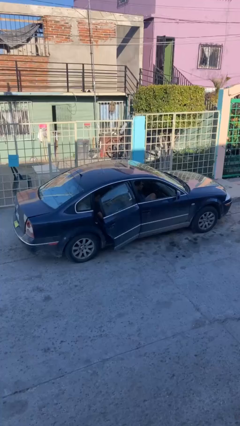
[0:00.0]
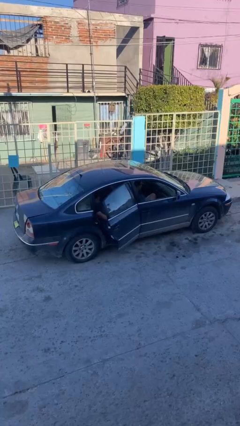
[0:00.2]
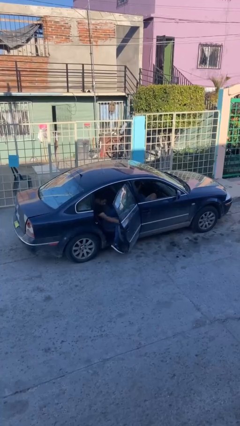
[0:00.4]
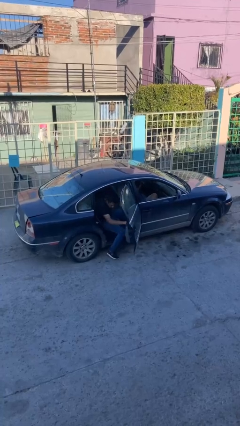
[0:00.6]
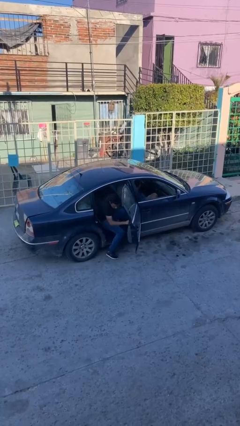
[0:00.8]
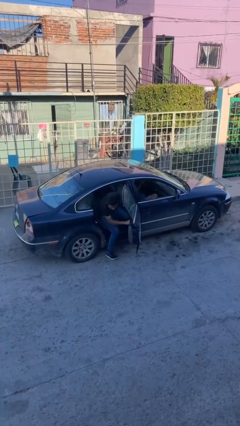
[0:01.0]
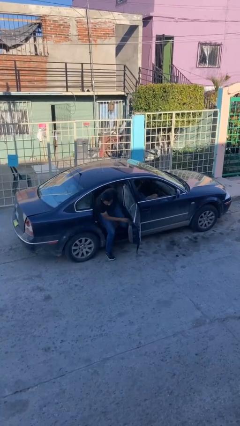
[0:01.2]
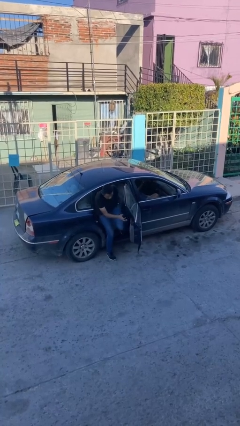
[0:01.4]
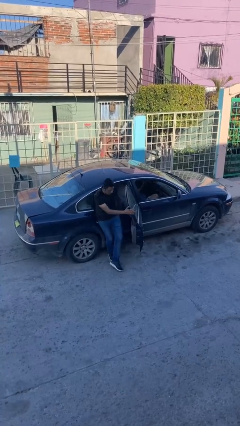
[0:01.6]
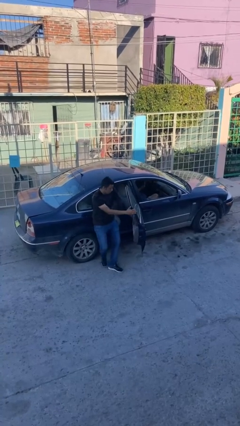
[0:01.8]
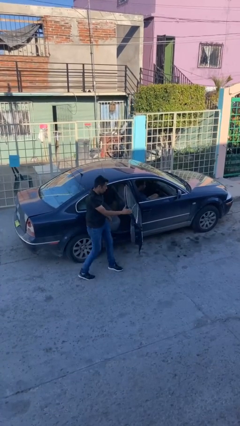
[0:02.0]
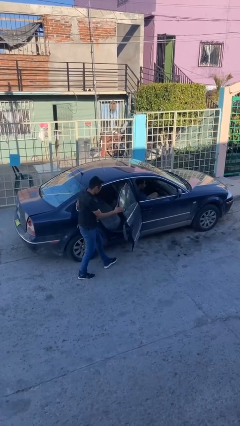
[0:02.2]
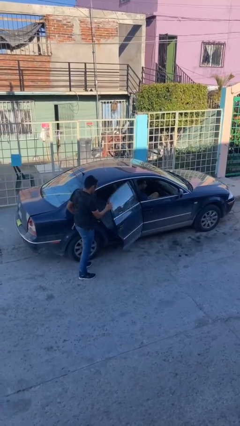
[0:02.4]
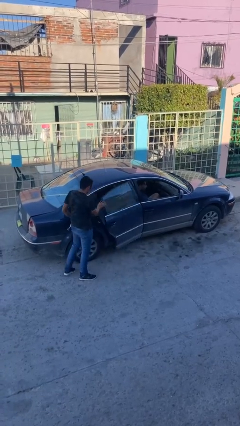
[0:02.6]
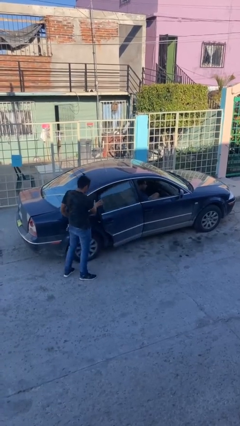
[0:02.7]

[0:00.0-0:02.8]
car drops off person

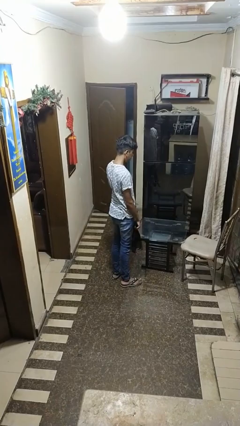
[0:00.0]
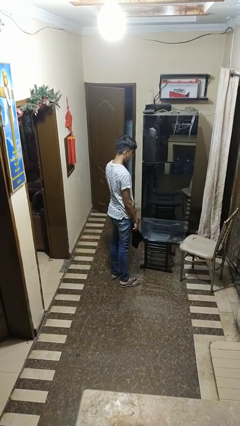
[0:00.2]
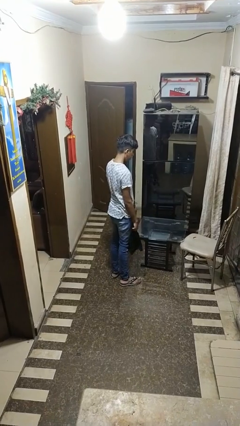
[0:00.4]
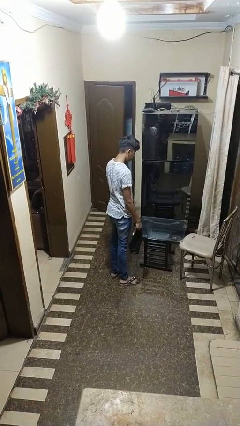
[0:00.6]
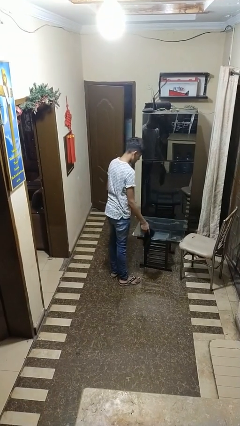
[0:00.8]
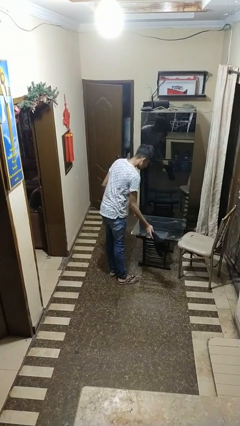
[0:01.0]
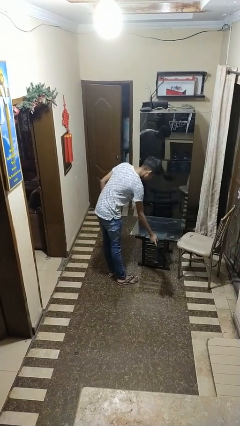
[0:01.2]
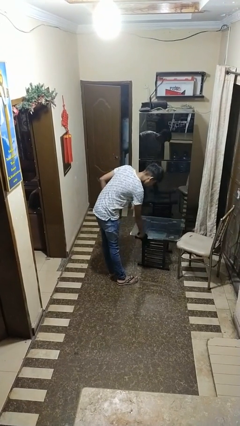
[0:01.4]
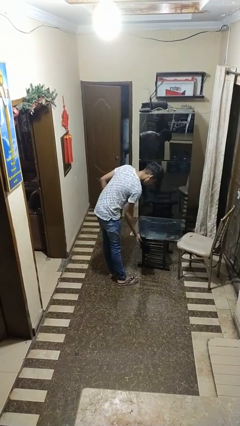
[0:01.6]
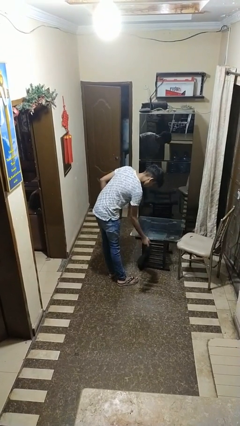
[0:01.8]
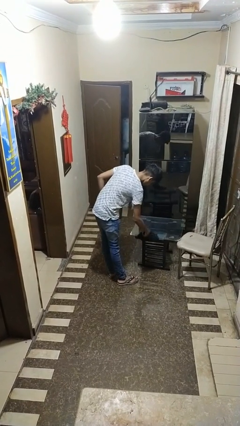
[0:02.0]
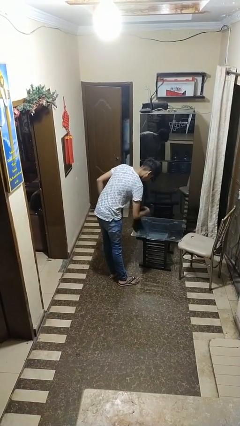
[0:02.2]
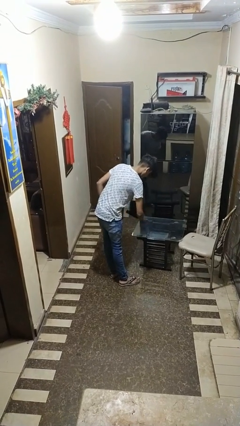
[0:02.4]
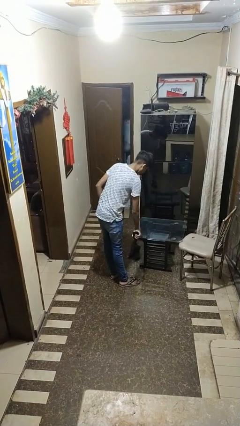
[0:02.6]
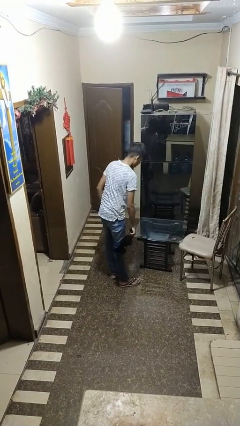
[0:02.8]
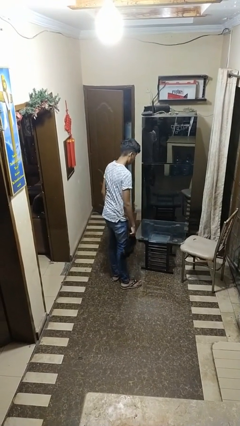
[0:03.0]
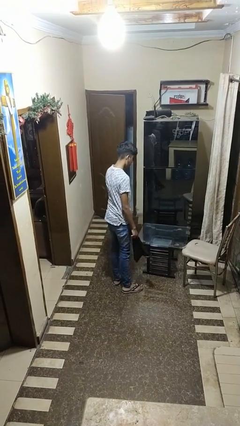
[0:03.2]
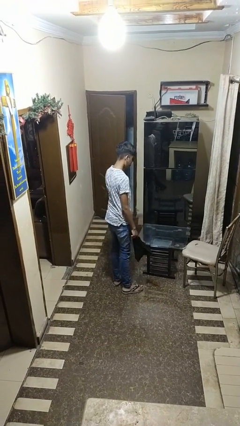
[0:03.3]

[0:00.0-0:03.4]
person dusts furniture

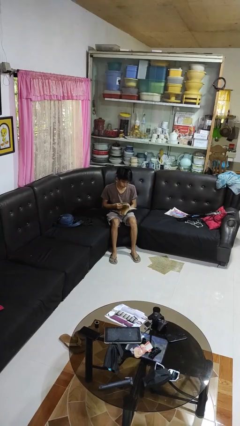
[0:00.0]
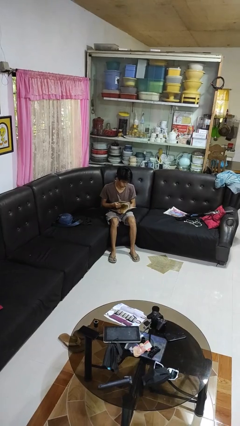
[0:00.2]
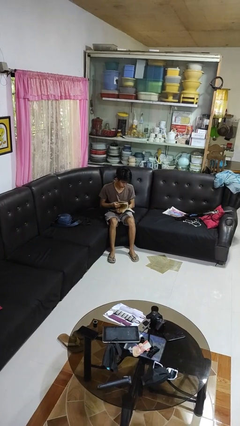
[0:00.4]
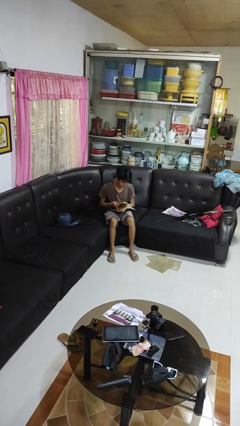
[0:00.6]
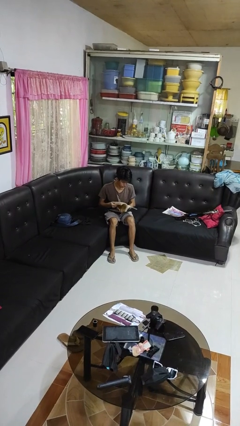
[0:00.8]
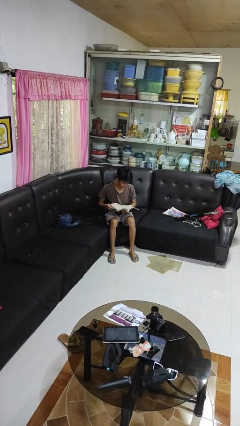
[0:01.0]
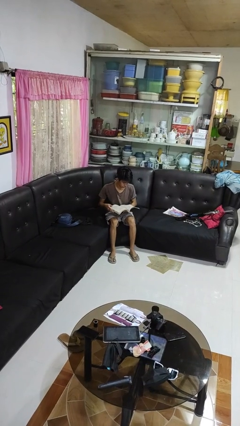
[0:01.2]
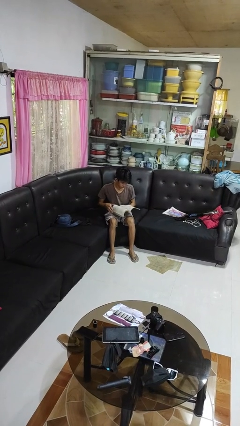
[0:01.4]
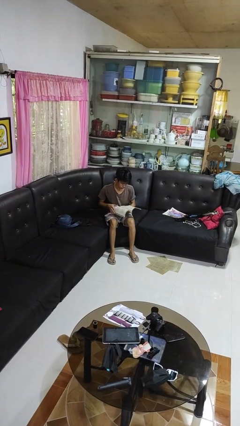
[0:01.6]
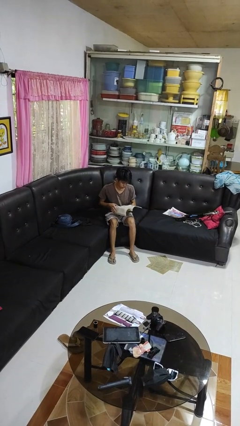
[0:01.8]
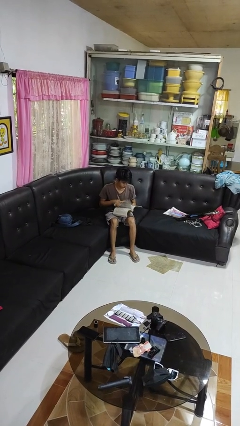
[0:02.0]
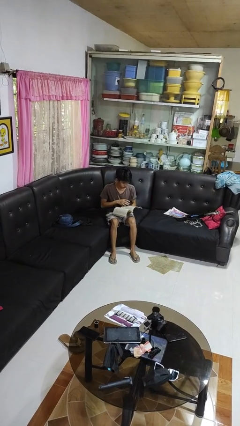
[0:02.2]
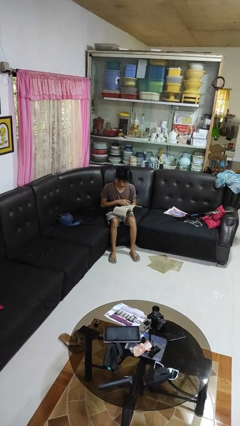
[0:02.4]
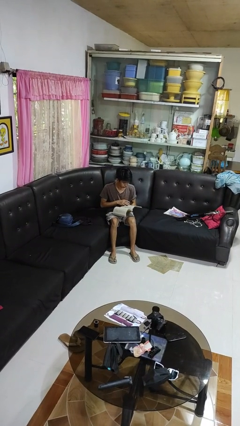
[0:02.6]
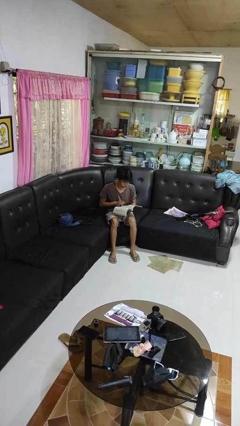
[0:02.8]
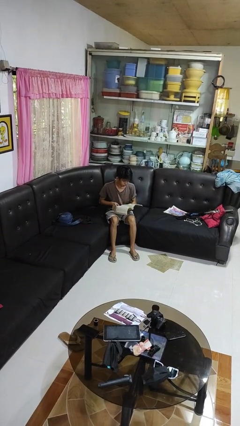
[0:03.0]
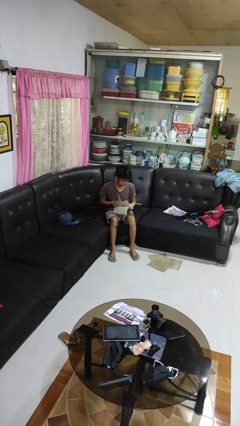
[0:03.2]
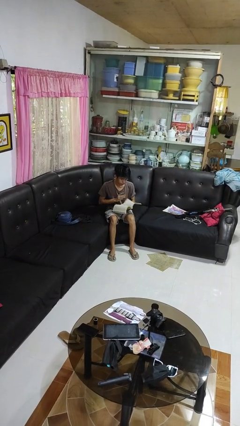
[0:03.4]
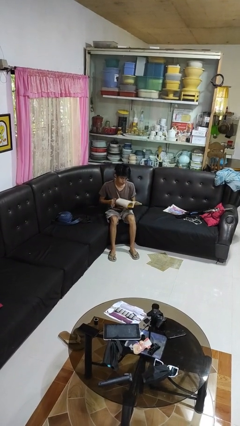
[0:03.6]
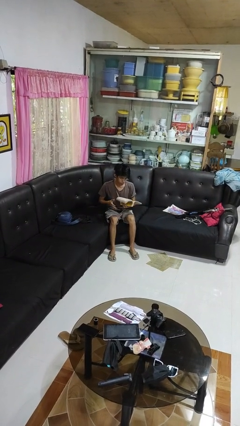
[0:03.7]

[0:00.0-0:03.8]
person reads book

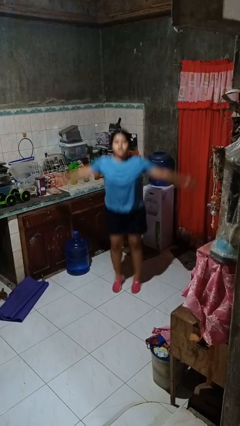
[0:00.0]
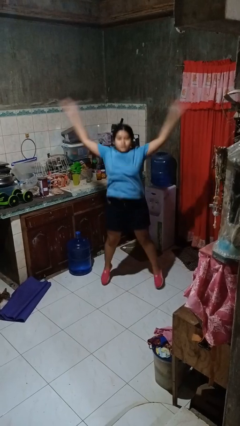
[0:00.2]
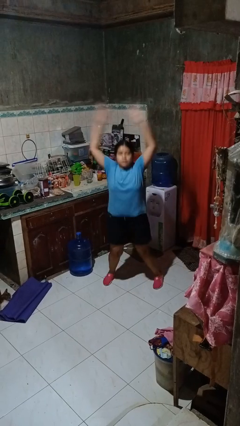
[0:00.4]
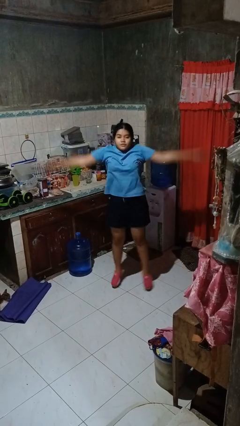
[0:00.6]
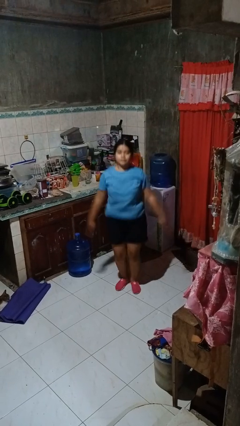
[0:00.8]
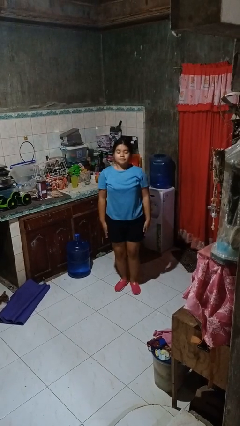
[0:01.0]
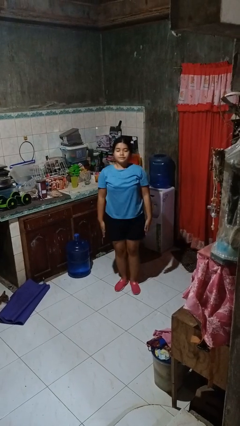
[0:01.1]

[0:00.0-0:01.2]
person exercises with jumping jacks

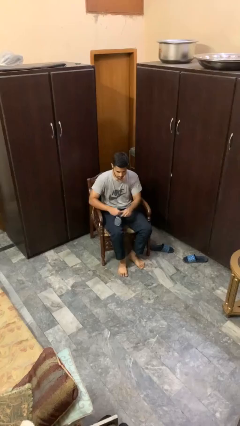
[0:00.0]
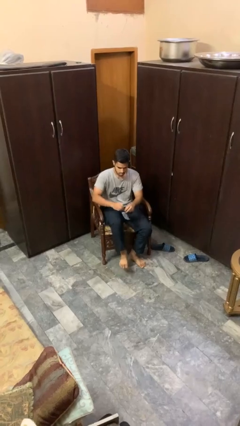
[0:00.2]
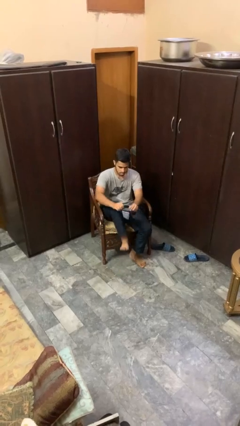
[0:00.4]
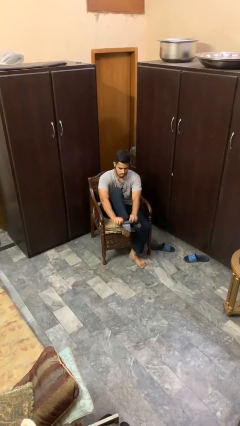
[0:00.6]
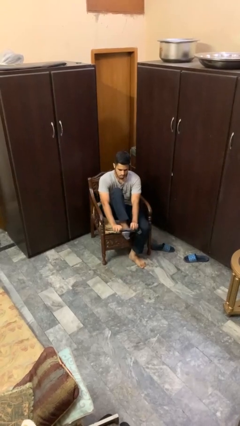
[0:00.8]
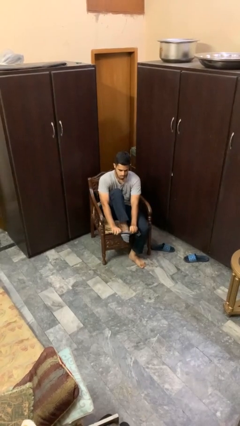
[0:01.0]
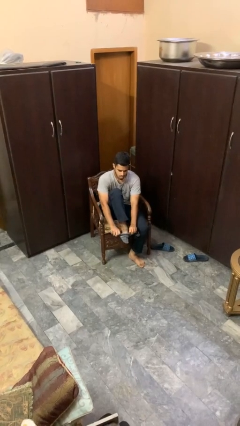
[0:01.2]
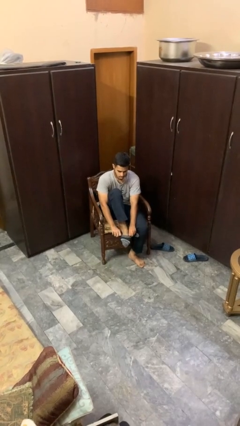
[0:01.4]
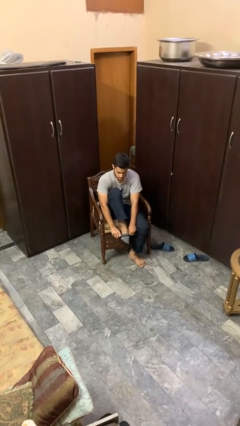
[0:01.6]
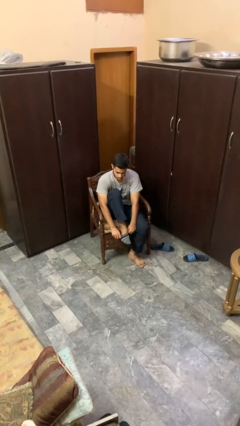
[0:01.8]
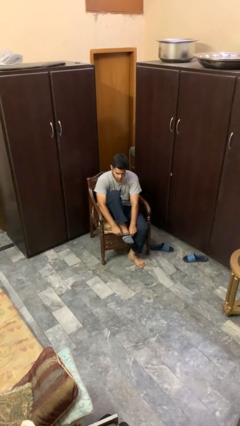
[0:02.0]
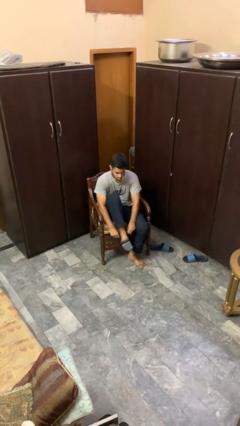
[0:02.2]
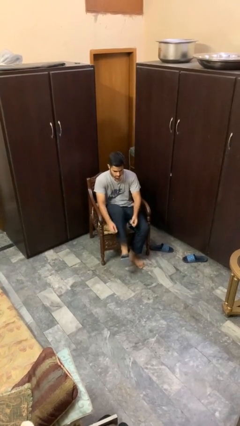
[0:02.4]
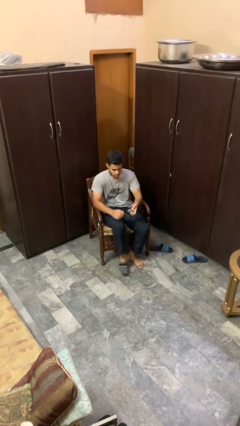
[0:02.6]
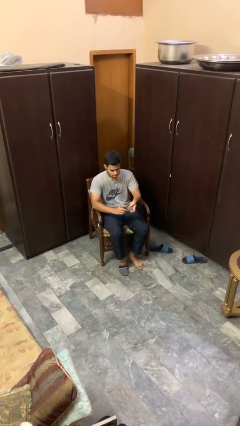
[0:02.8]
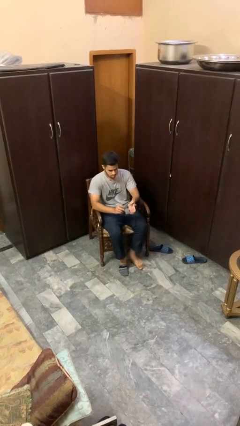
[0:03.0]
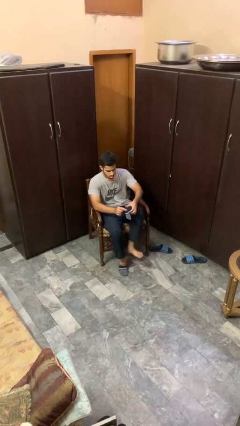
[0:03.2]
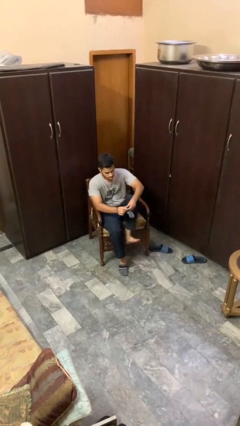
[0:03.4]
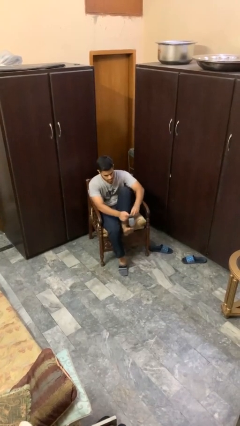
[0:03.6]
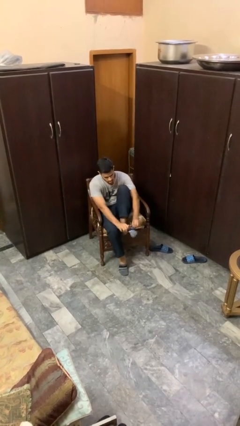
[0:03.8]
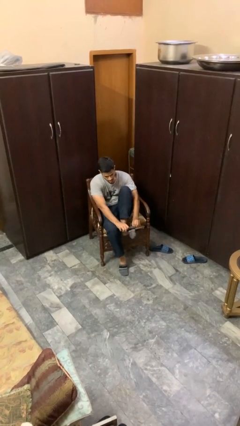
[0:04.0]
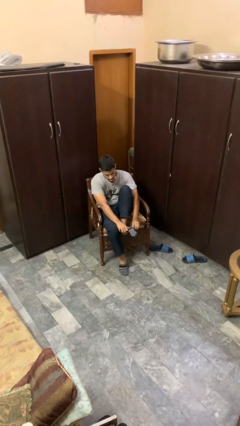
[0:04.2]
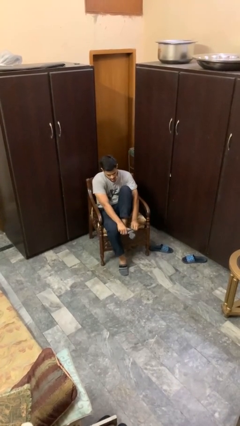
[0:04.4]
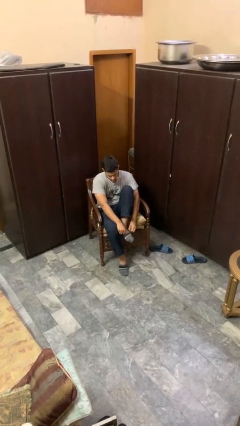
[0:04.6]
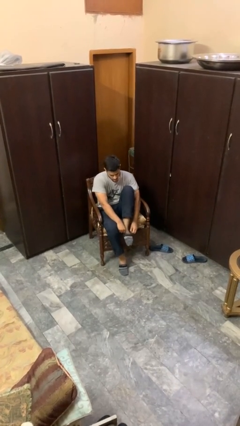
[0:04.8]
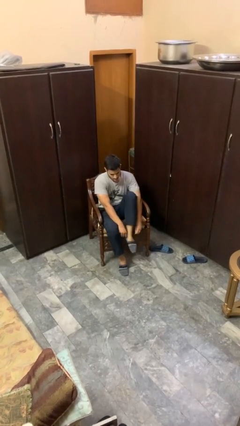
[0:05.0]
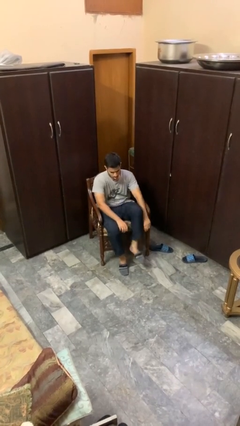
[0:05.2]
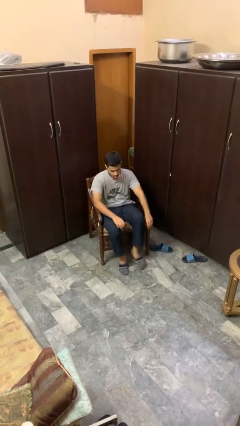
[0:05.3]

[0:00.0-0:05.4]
person puts on socks

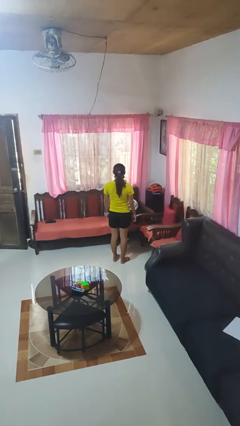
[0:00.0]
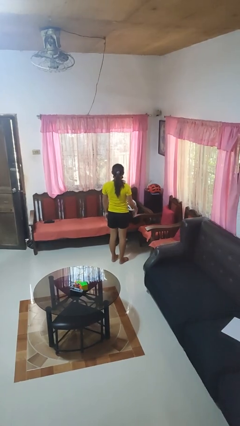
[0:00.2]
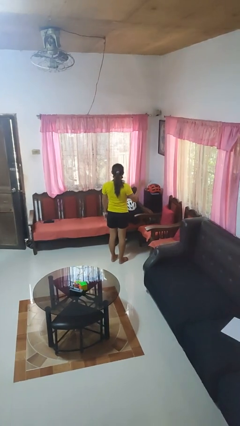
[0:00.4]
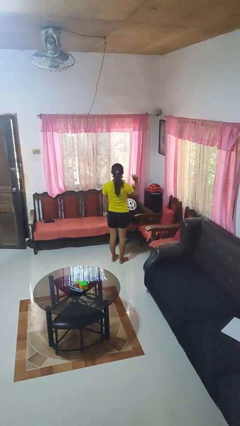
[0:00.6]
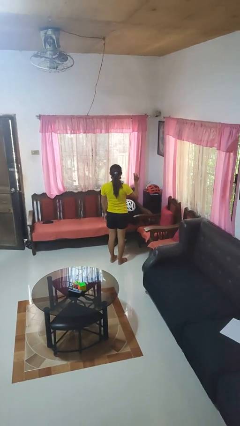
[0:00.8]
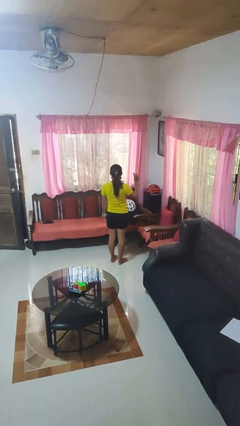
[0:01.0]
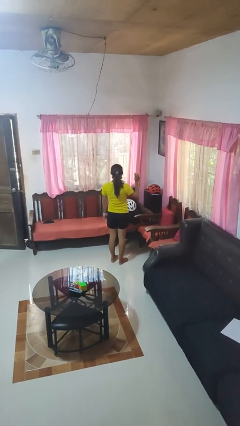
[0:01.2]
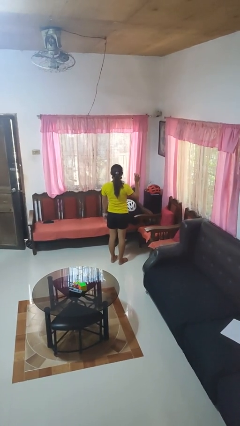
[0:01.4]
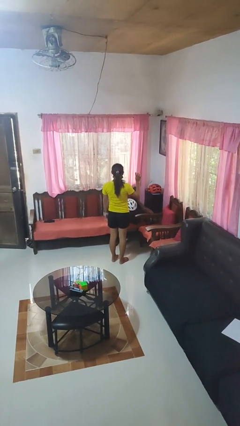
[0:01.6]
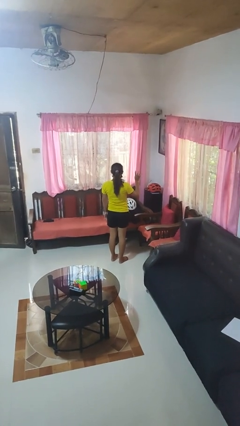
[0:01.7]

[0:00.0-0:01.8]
person gestures number four
